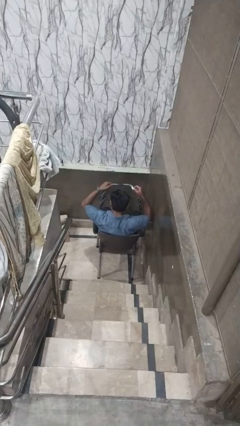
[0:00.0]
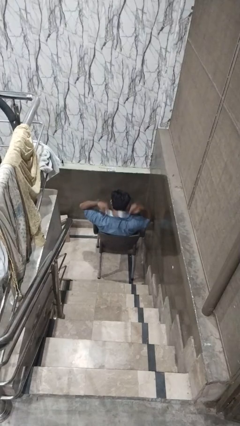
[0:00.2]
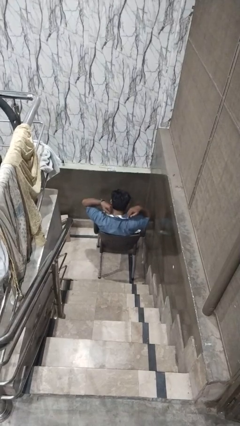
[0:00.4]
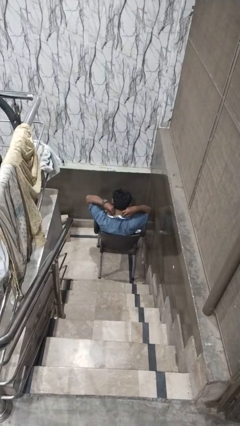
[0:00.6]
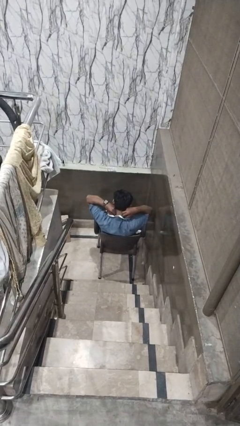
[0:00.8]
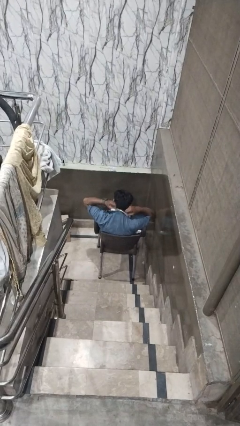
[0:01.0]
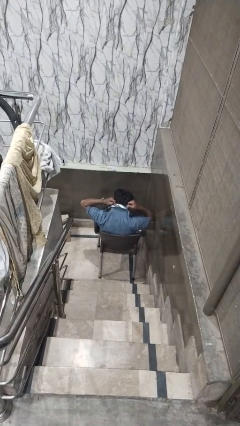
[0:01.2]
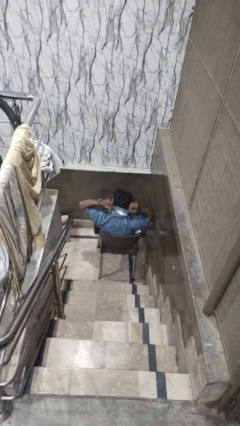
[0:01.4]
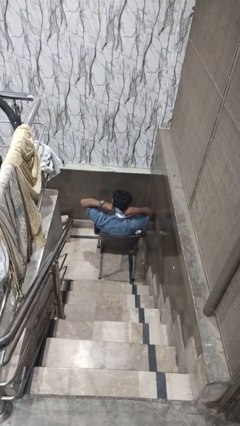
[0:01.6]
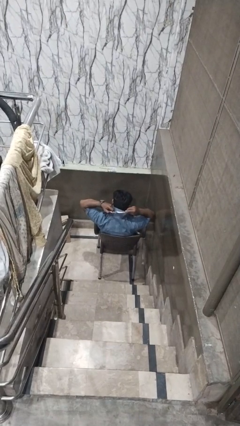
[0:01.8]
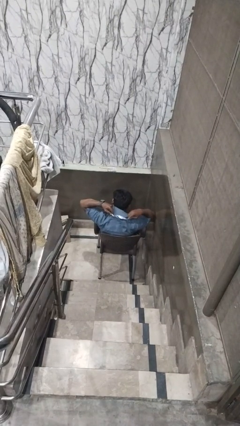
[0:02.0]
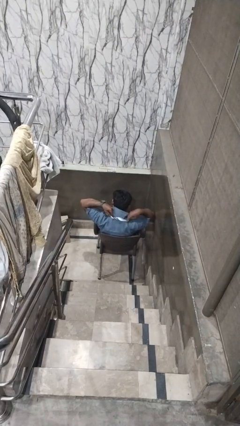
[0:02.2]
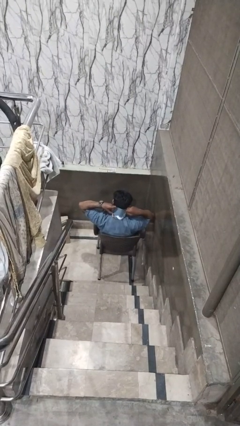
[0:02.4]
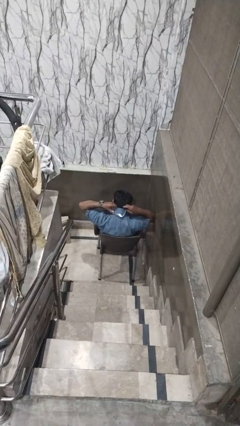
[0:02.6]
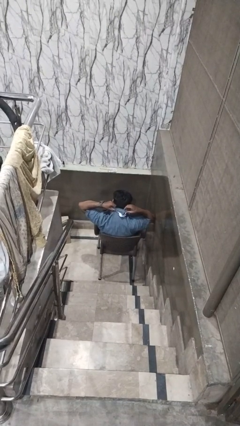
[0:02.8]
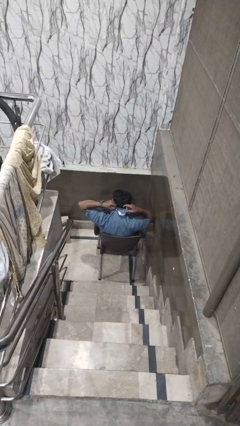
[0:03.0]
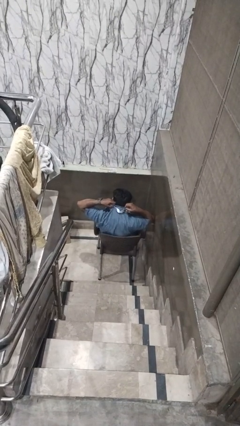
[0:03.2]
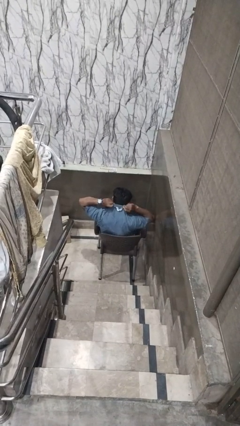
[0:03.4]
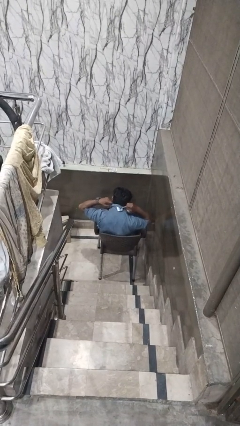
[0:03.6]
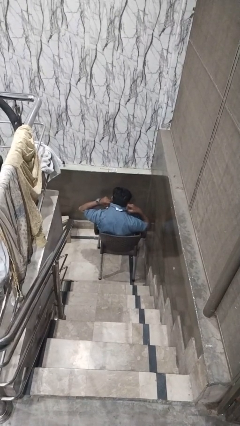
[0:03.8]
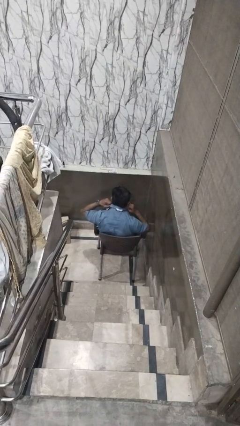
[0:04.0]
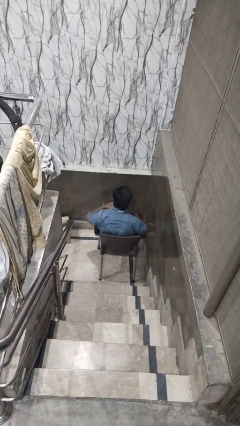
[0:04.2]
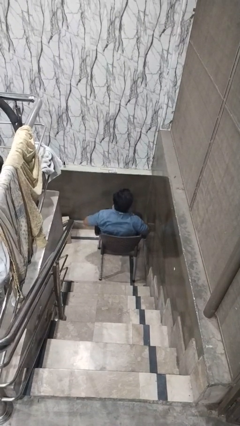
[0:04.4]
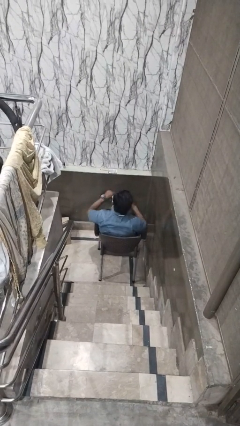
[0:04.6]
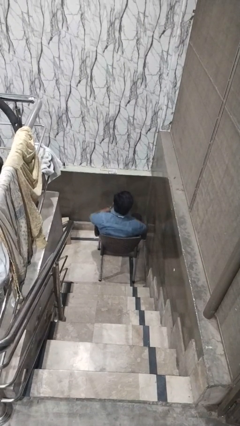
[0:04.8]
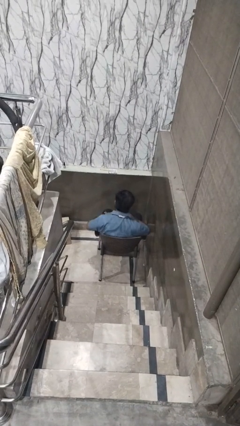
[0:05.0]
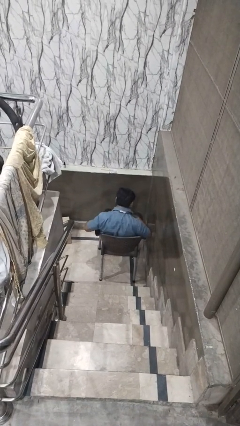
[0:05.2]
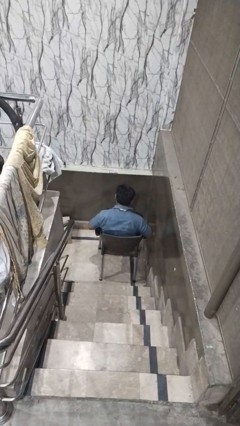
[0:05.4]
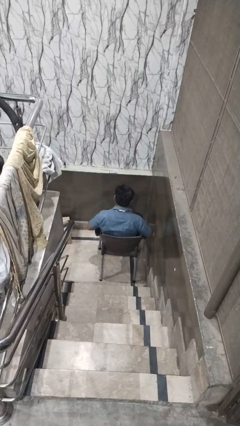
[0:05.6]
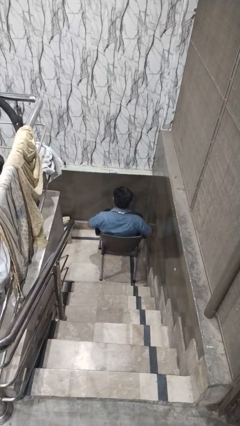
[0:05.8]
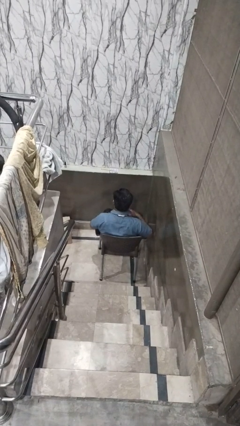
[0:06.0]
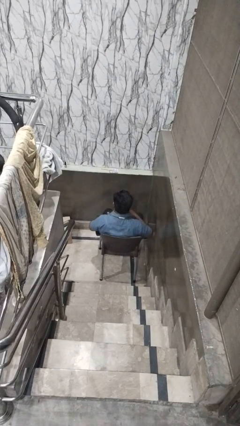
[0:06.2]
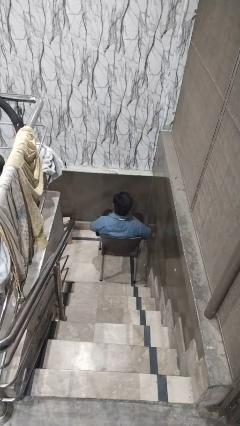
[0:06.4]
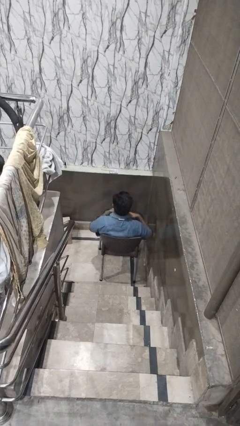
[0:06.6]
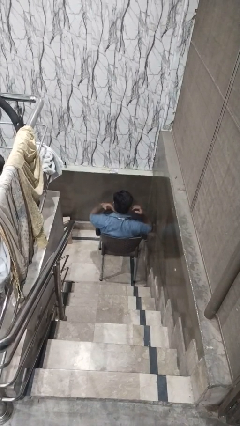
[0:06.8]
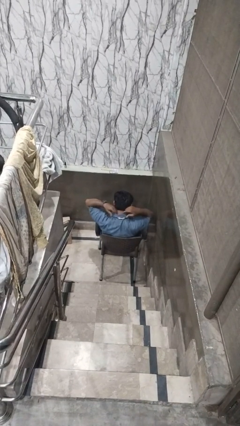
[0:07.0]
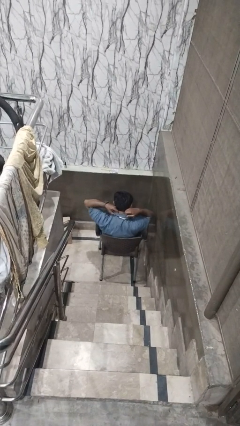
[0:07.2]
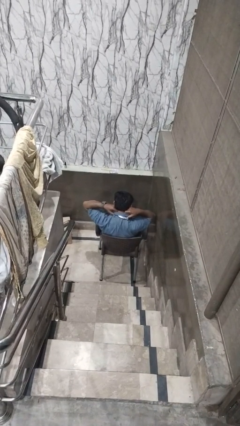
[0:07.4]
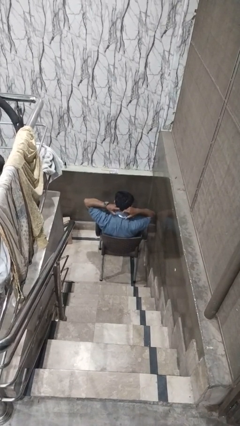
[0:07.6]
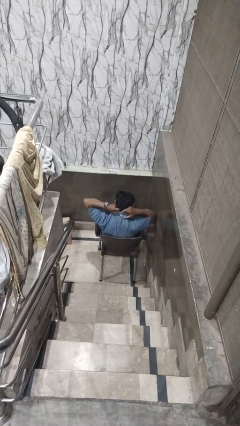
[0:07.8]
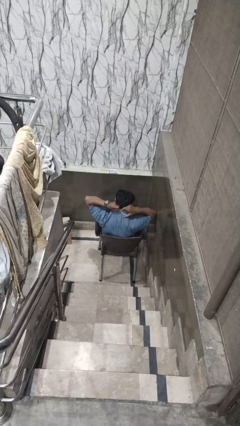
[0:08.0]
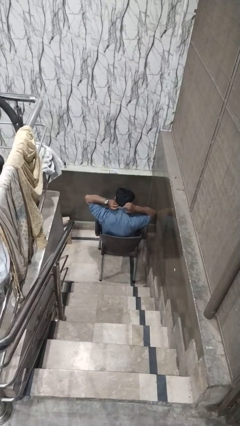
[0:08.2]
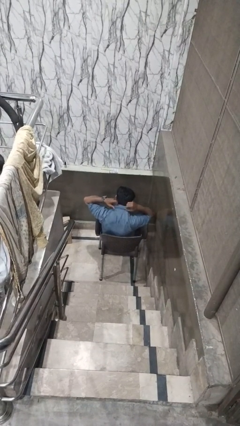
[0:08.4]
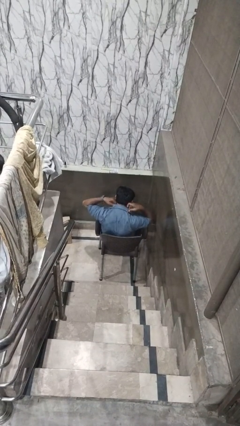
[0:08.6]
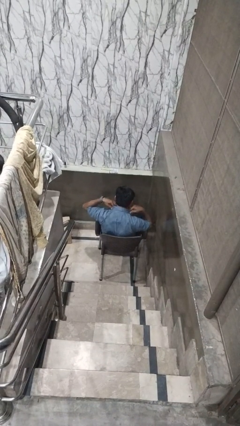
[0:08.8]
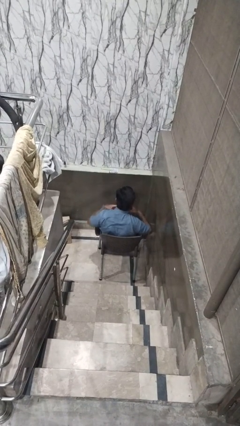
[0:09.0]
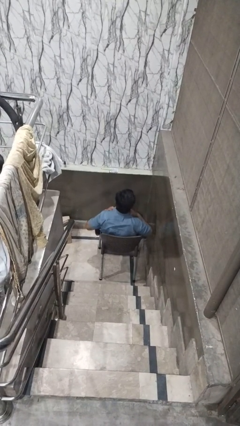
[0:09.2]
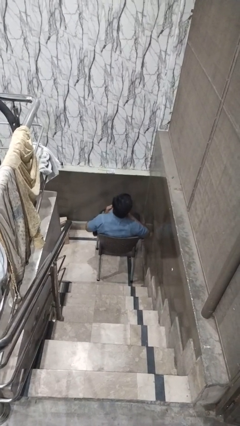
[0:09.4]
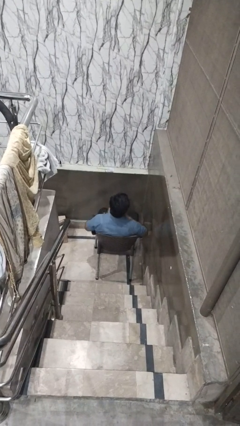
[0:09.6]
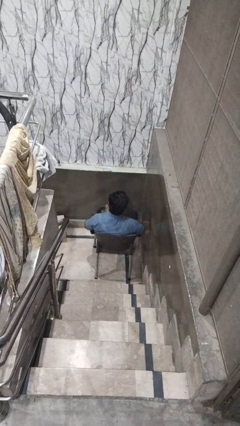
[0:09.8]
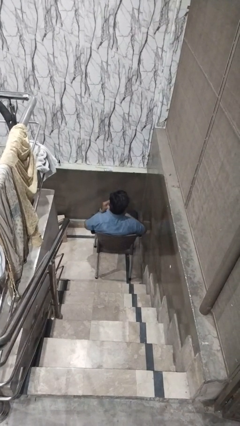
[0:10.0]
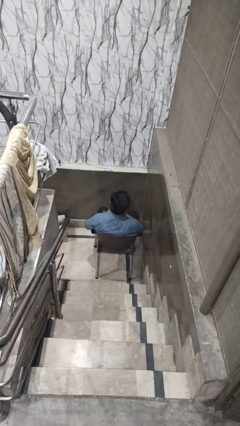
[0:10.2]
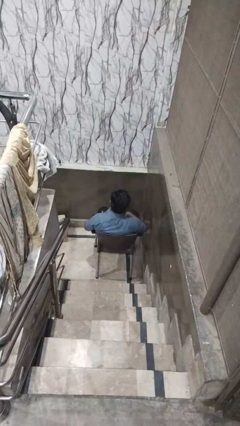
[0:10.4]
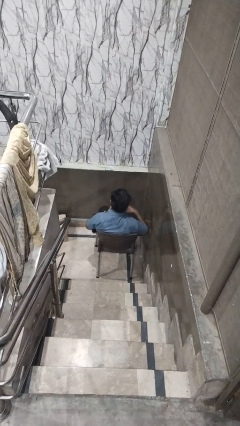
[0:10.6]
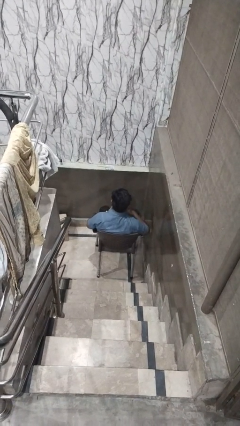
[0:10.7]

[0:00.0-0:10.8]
person puts on necktie

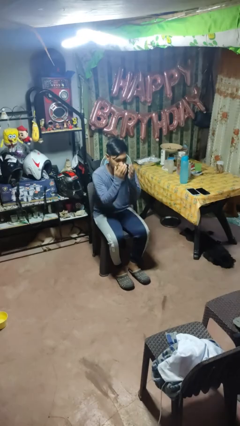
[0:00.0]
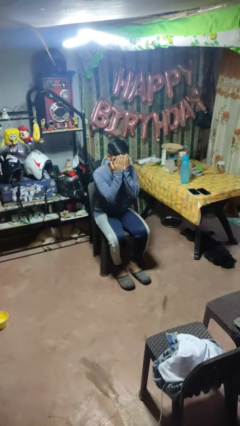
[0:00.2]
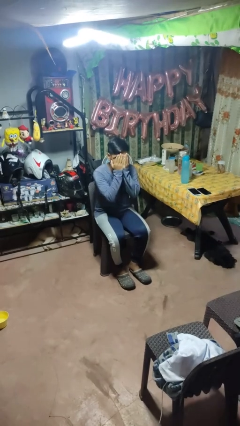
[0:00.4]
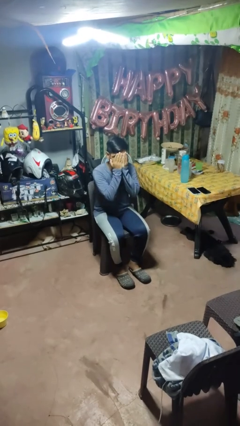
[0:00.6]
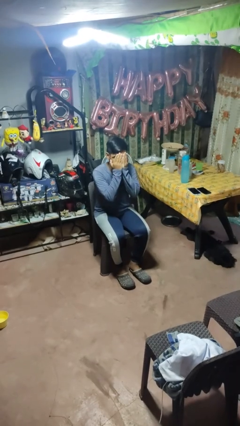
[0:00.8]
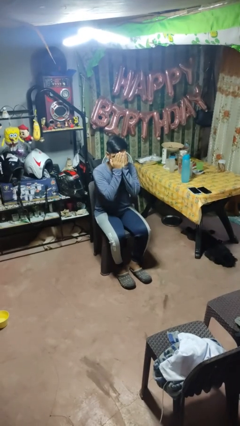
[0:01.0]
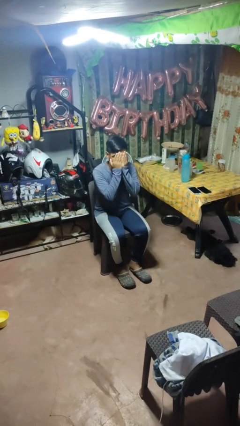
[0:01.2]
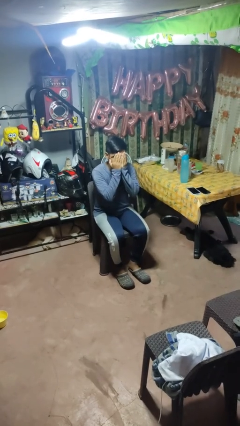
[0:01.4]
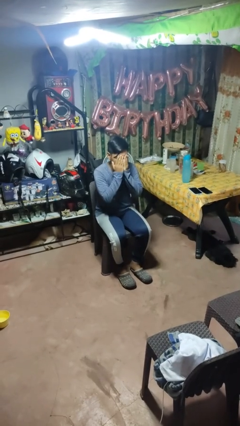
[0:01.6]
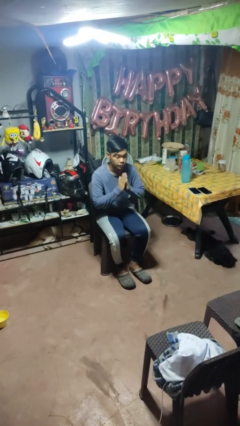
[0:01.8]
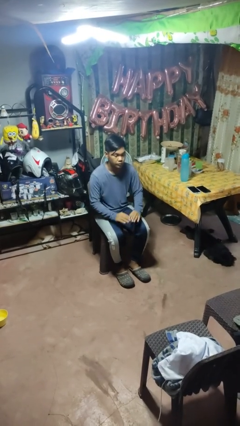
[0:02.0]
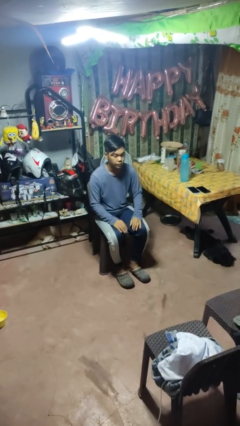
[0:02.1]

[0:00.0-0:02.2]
person covers face with hands

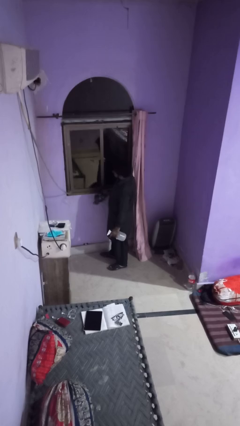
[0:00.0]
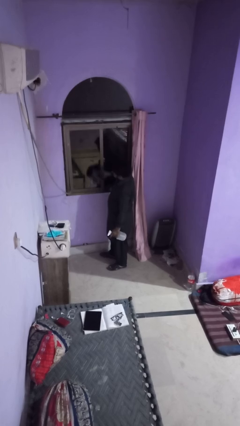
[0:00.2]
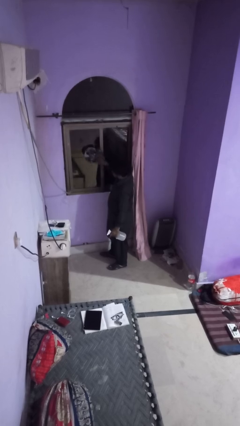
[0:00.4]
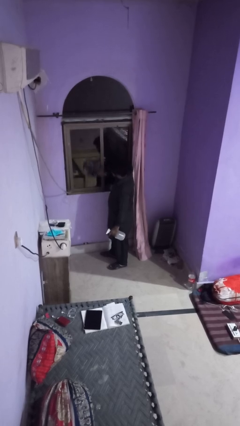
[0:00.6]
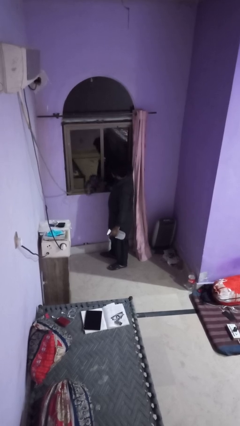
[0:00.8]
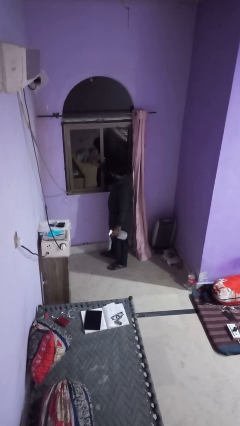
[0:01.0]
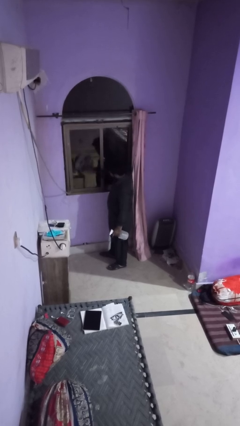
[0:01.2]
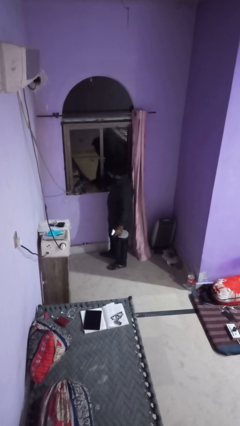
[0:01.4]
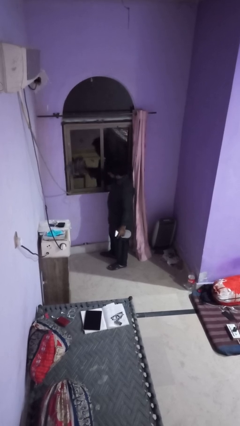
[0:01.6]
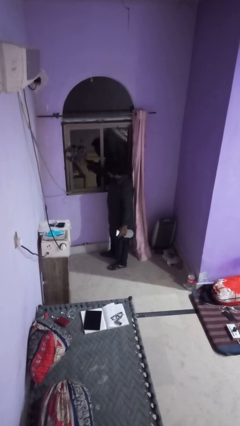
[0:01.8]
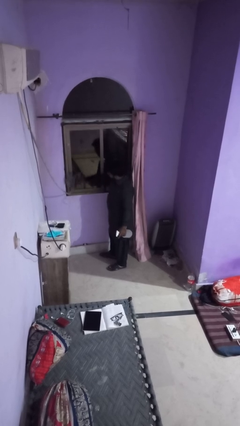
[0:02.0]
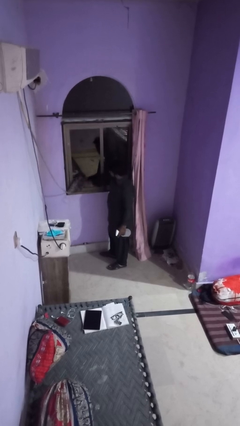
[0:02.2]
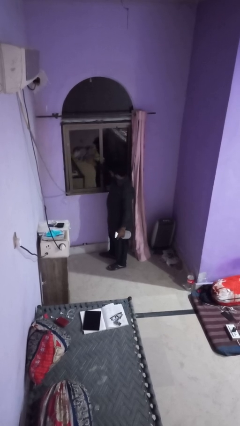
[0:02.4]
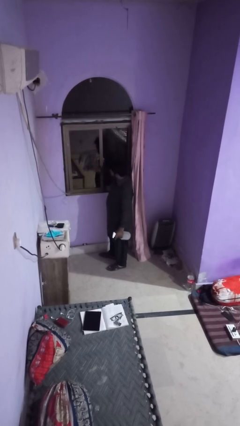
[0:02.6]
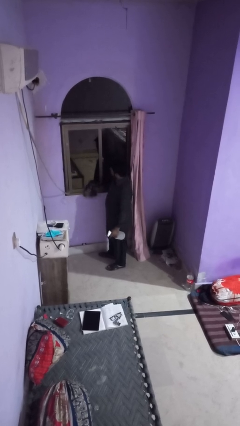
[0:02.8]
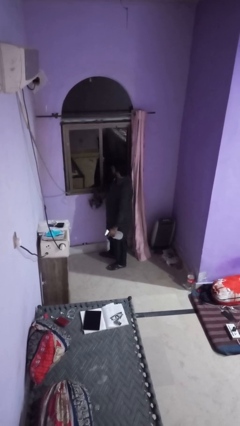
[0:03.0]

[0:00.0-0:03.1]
person washes window

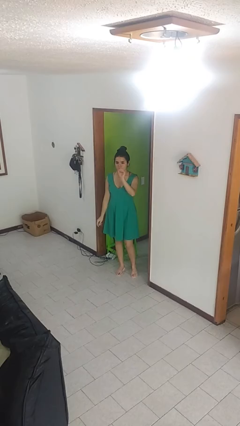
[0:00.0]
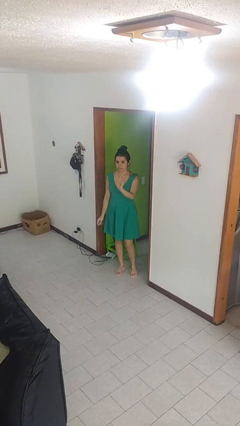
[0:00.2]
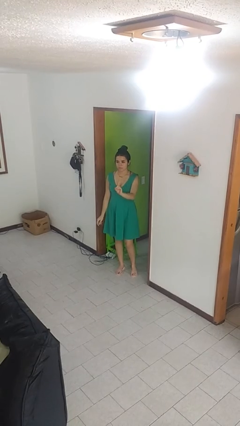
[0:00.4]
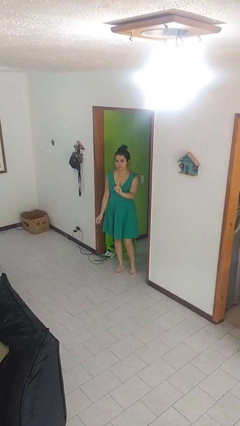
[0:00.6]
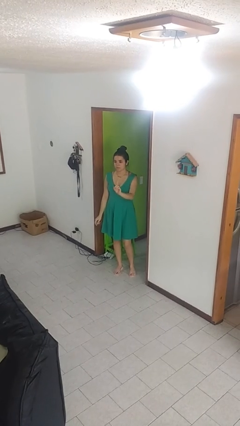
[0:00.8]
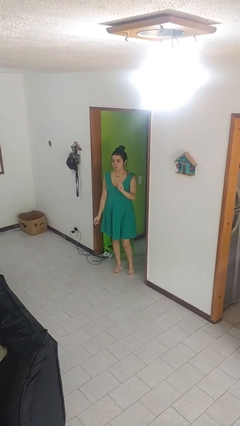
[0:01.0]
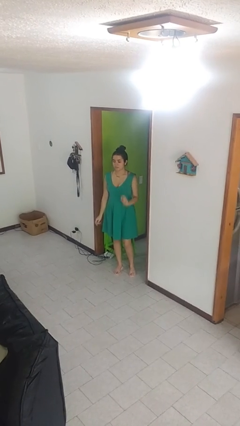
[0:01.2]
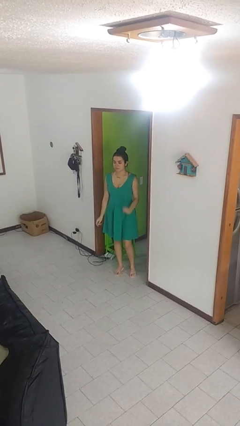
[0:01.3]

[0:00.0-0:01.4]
person gestures number one

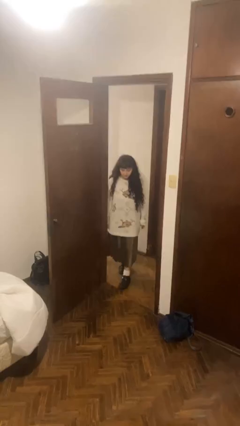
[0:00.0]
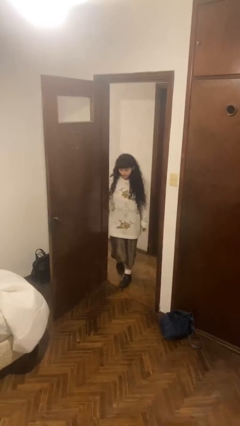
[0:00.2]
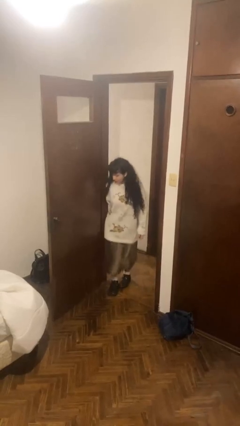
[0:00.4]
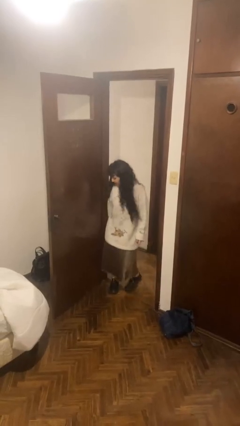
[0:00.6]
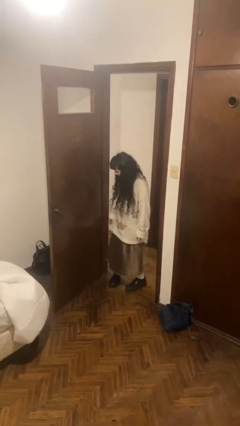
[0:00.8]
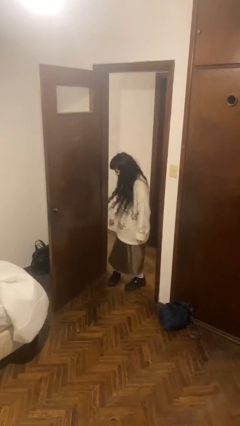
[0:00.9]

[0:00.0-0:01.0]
person bumps into wall
